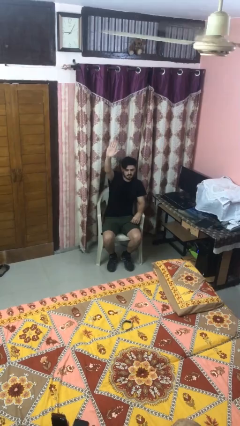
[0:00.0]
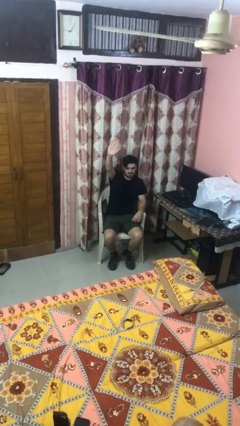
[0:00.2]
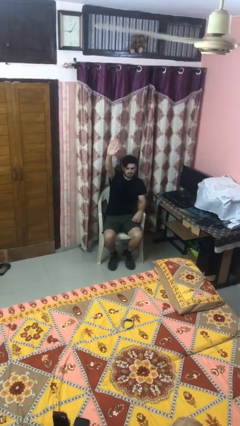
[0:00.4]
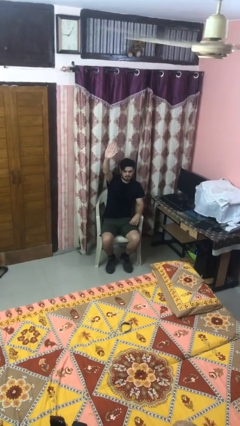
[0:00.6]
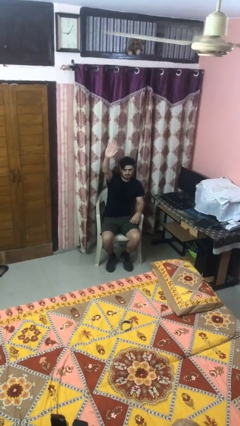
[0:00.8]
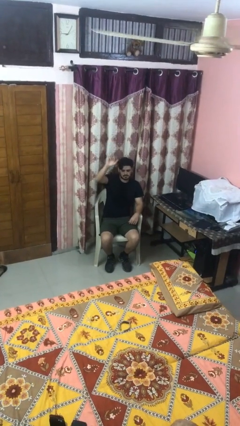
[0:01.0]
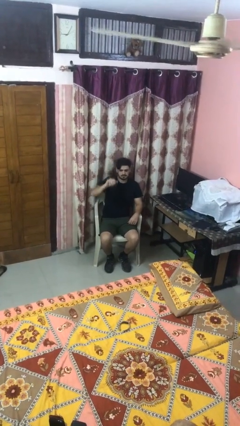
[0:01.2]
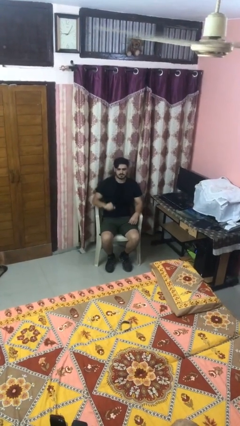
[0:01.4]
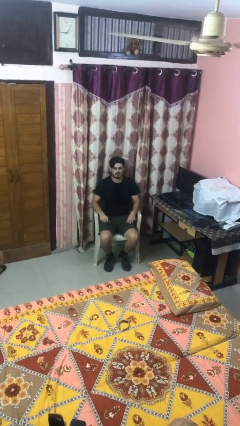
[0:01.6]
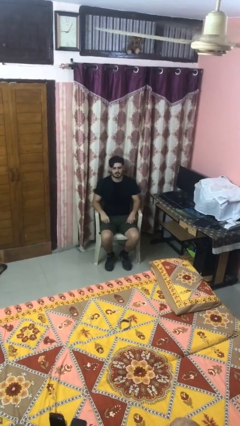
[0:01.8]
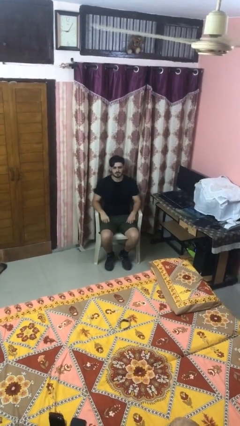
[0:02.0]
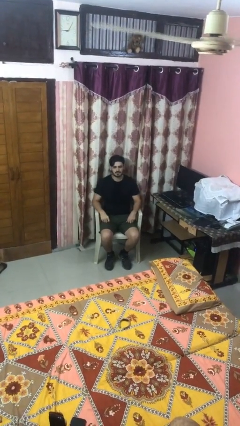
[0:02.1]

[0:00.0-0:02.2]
person gestures lower hand

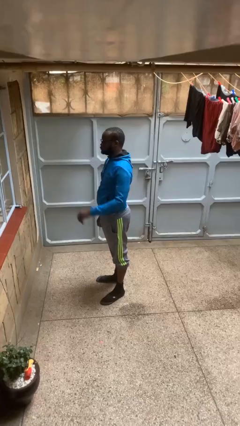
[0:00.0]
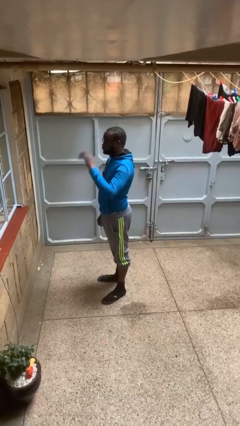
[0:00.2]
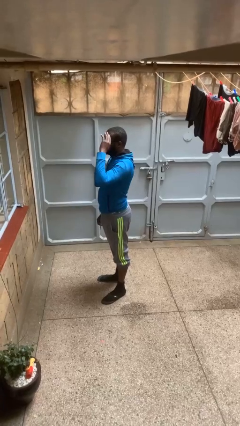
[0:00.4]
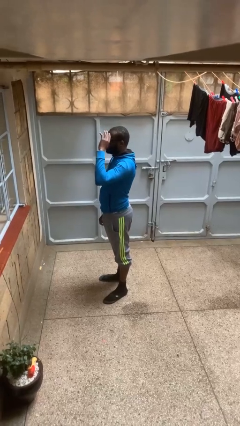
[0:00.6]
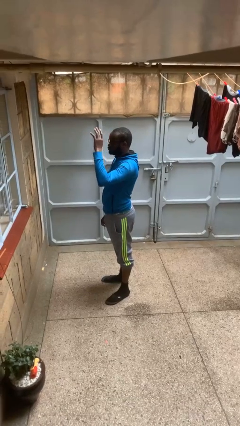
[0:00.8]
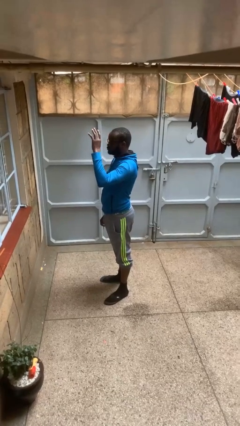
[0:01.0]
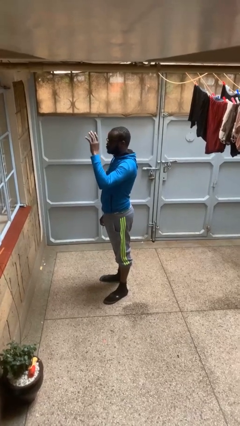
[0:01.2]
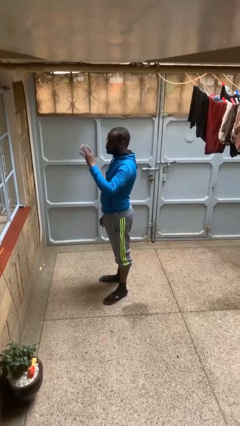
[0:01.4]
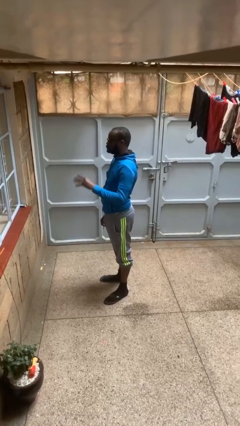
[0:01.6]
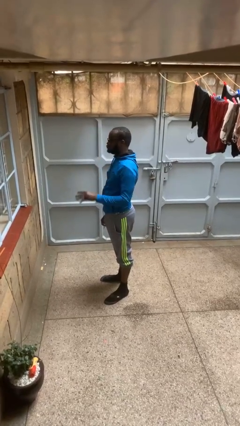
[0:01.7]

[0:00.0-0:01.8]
person salutes

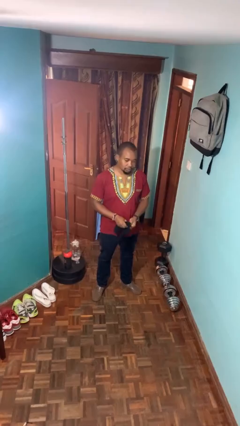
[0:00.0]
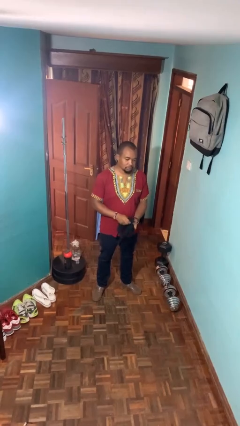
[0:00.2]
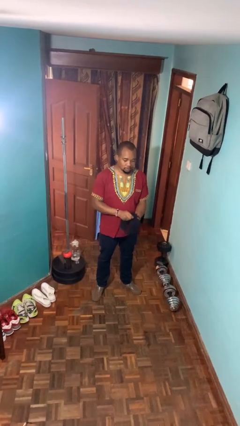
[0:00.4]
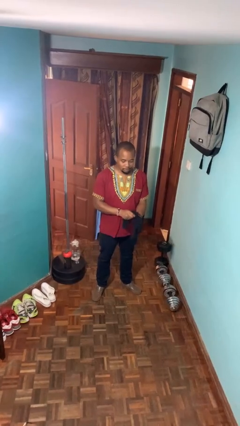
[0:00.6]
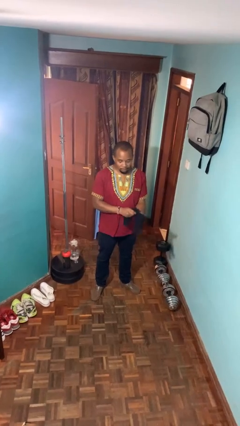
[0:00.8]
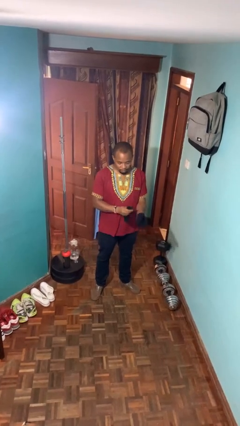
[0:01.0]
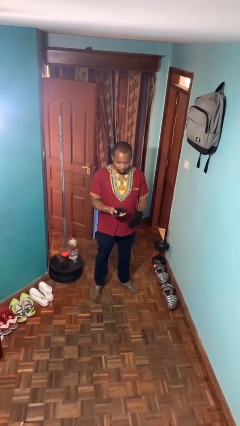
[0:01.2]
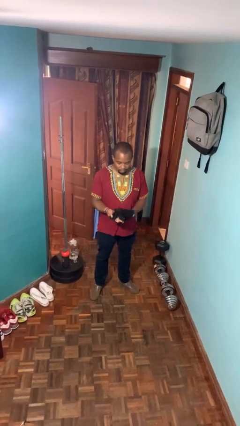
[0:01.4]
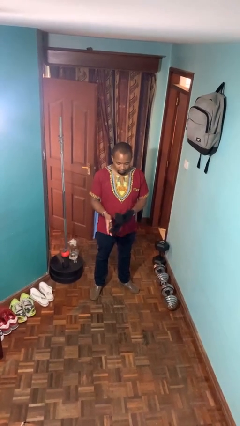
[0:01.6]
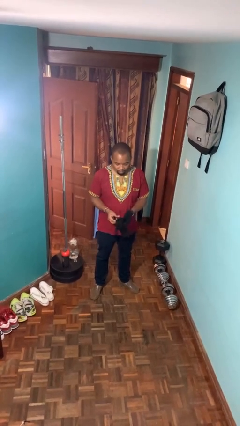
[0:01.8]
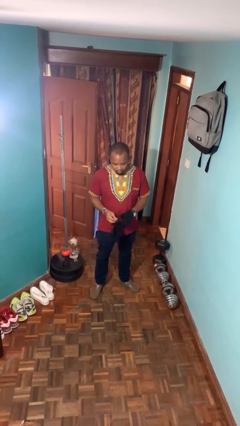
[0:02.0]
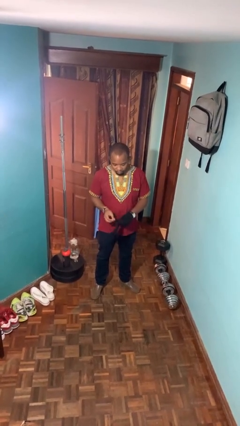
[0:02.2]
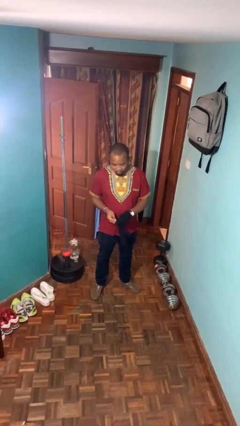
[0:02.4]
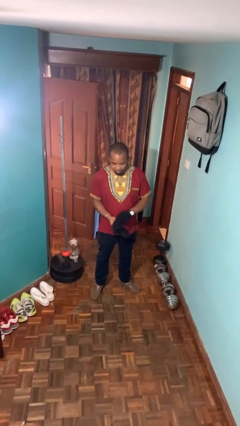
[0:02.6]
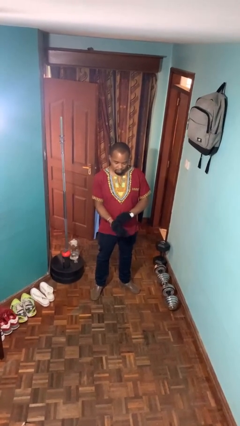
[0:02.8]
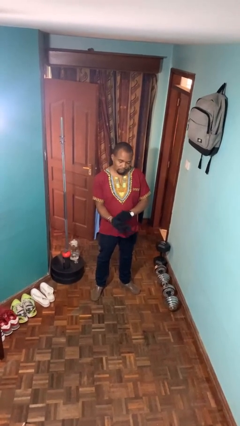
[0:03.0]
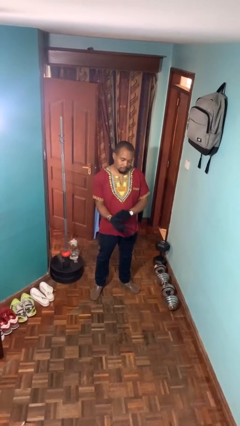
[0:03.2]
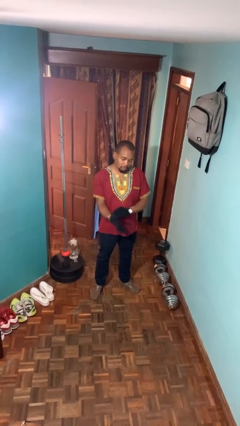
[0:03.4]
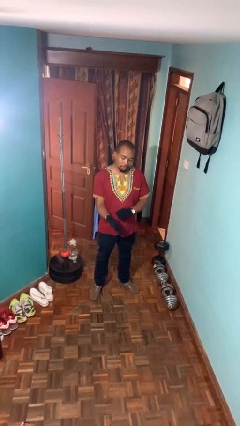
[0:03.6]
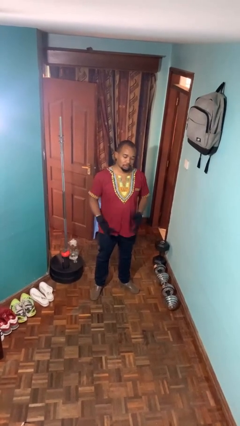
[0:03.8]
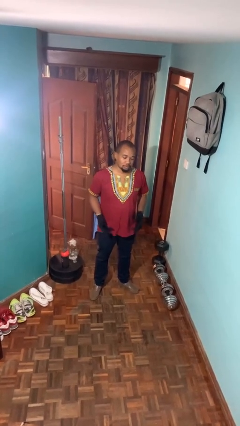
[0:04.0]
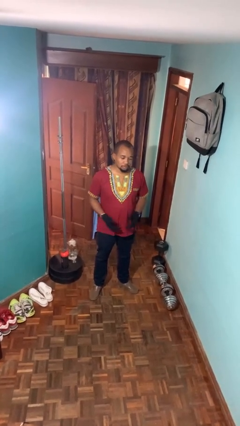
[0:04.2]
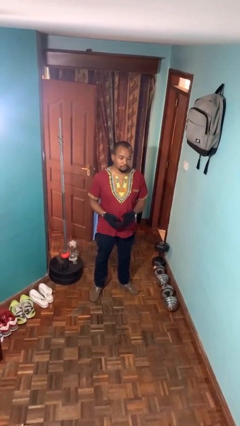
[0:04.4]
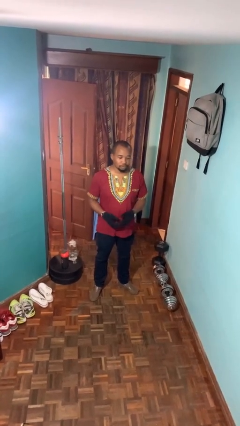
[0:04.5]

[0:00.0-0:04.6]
person puts on gloves

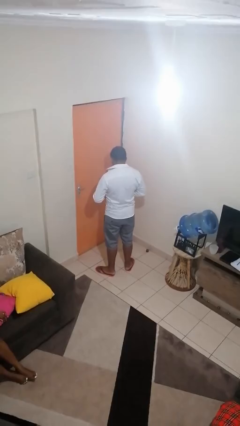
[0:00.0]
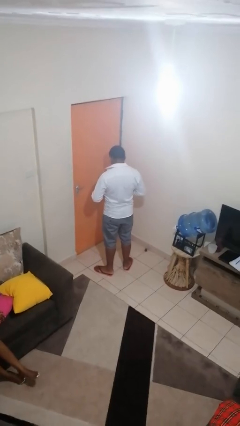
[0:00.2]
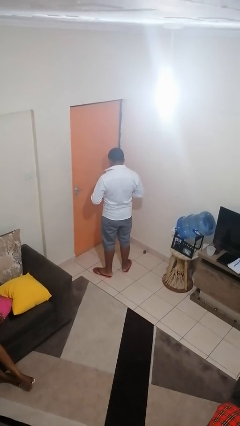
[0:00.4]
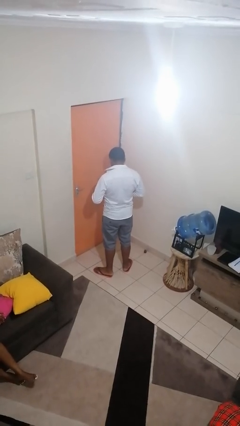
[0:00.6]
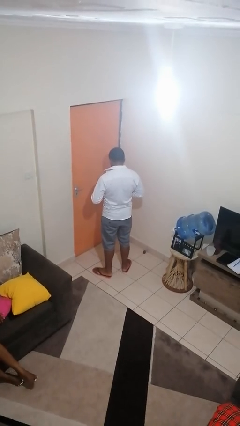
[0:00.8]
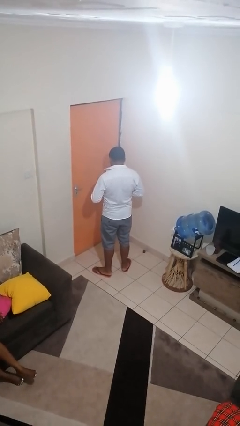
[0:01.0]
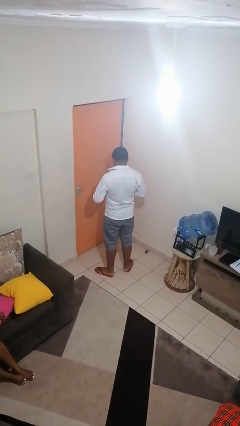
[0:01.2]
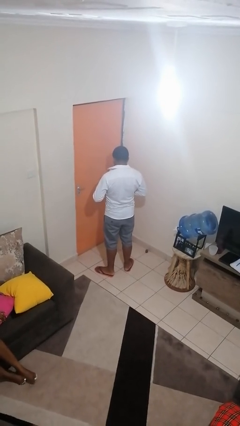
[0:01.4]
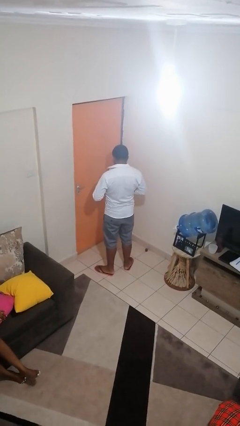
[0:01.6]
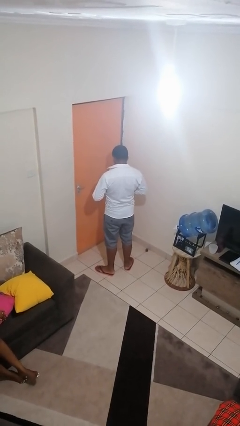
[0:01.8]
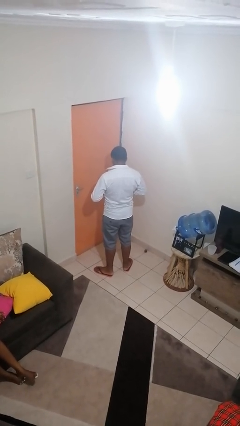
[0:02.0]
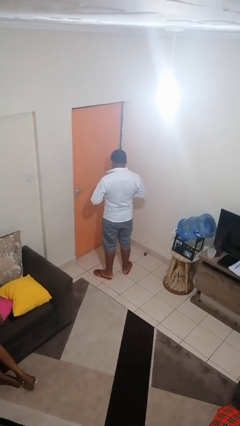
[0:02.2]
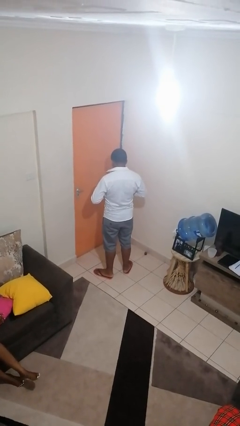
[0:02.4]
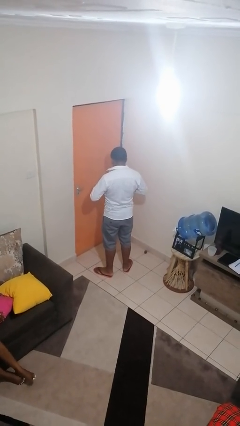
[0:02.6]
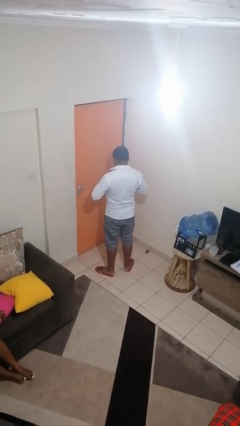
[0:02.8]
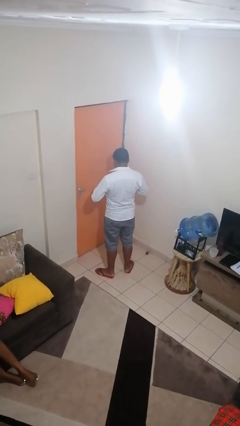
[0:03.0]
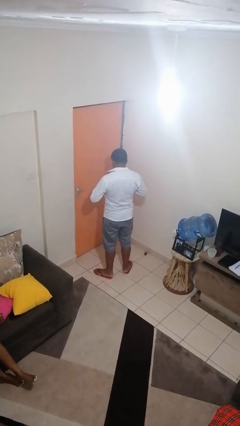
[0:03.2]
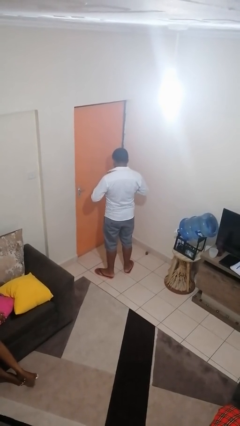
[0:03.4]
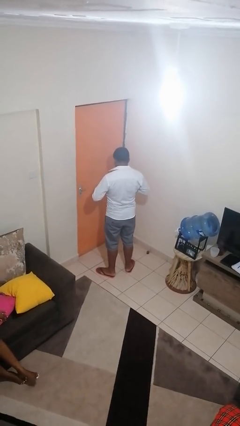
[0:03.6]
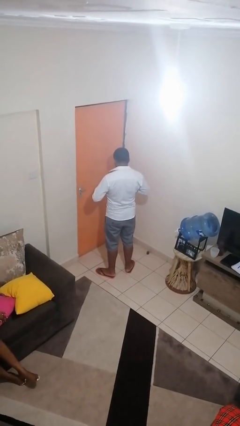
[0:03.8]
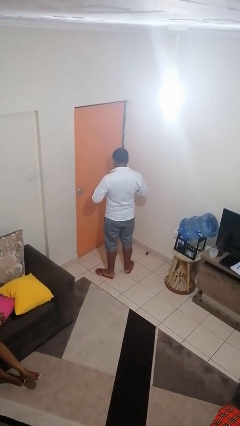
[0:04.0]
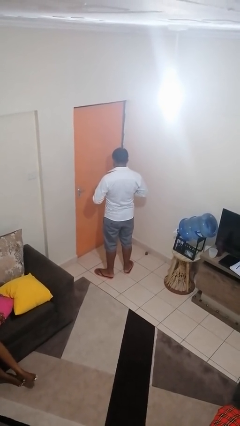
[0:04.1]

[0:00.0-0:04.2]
person buttons shirt

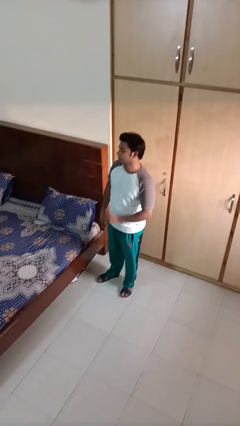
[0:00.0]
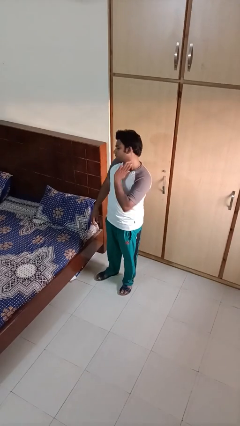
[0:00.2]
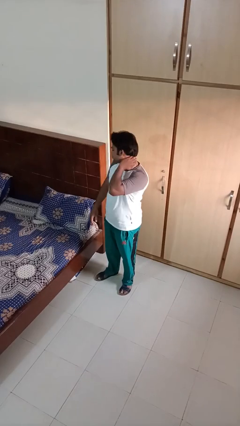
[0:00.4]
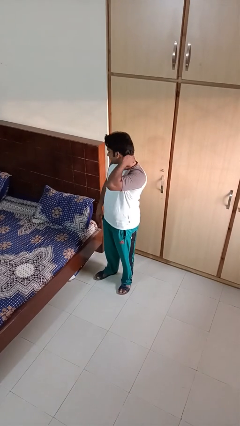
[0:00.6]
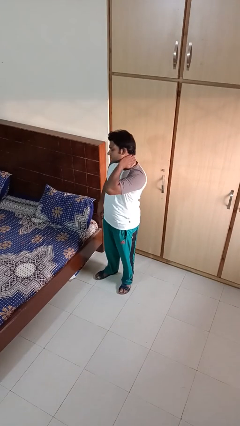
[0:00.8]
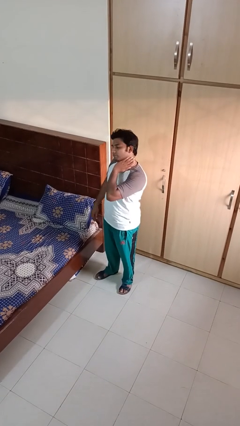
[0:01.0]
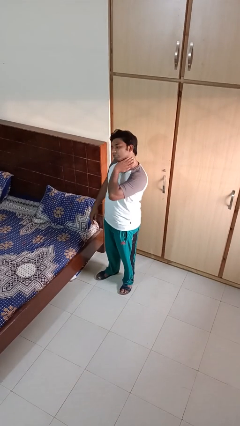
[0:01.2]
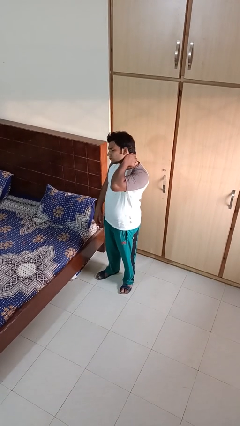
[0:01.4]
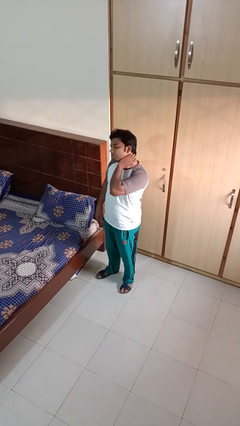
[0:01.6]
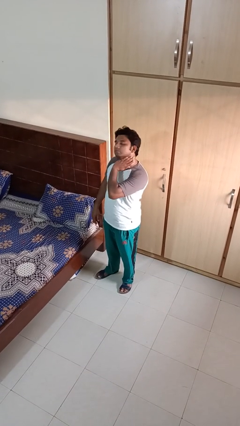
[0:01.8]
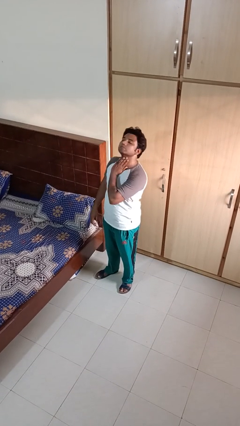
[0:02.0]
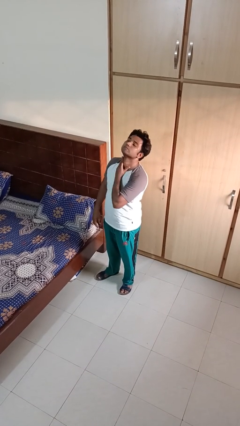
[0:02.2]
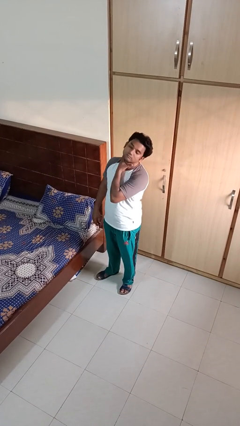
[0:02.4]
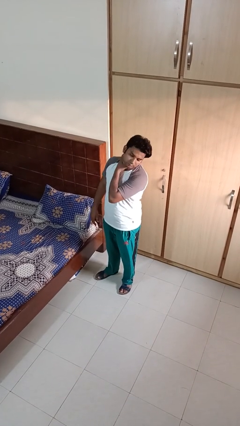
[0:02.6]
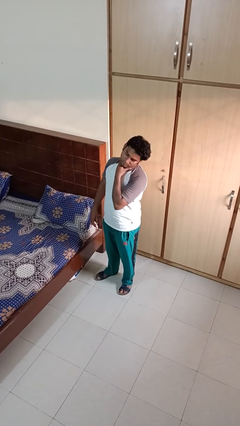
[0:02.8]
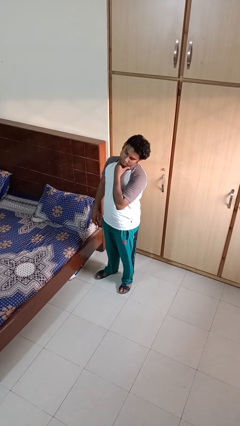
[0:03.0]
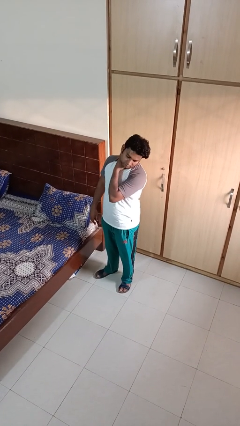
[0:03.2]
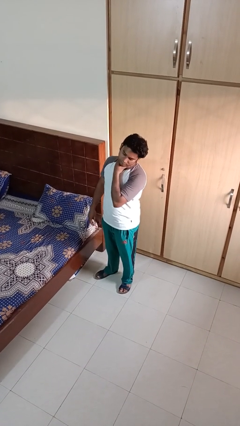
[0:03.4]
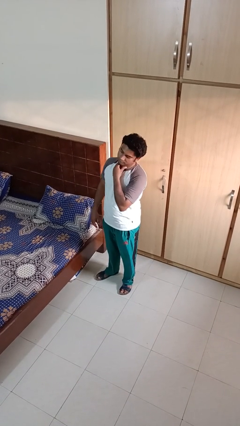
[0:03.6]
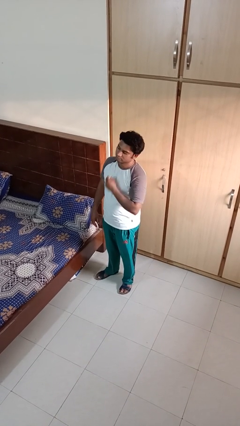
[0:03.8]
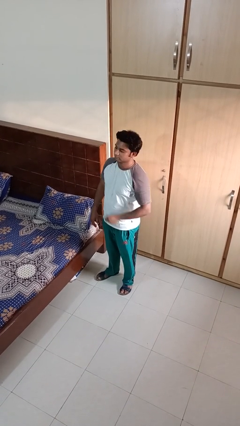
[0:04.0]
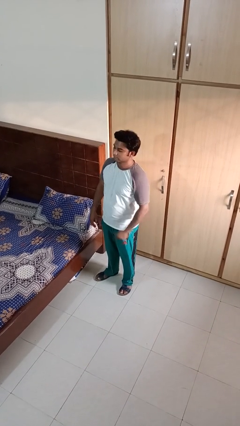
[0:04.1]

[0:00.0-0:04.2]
person rubs neck

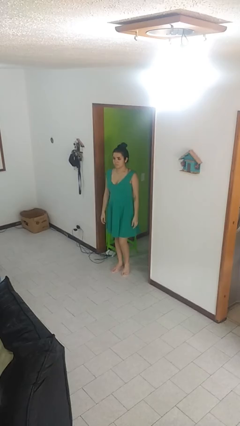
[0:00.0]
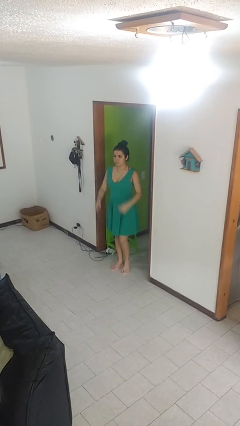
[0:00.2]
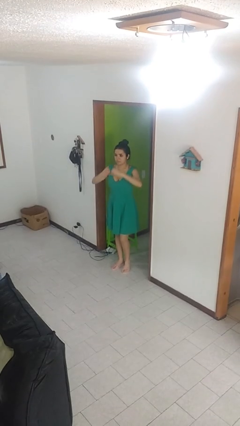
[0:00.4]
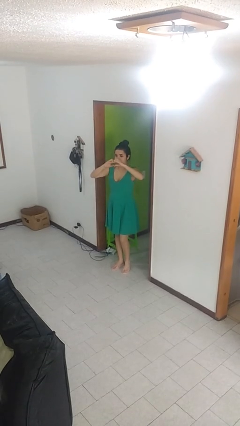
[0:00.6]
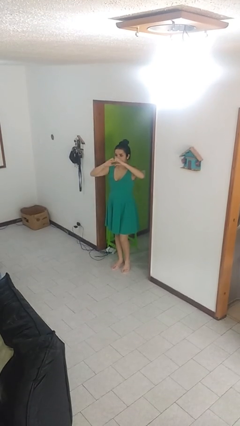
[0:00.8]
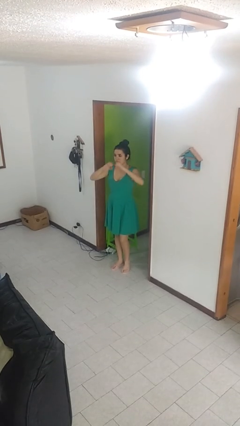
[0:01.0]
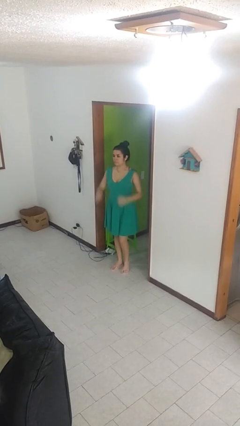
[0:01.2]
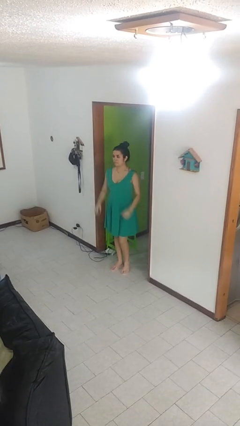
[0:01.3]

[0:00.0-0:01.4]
person gestures heart
